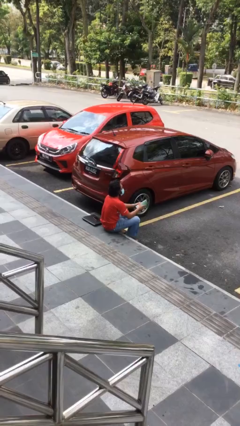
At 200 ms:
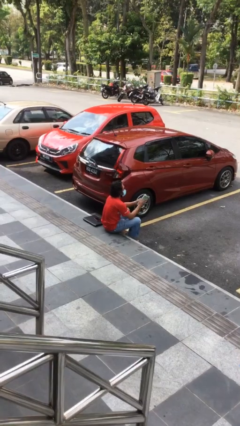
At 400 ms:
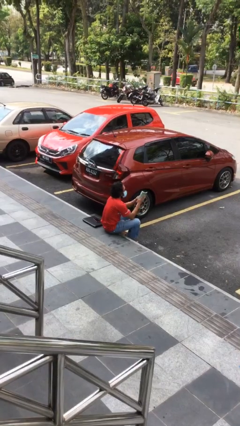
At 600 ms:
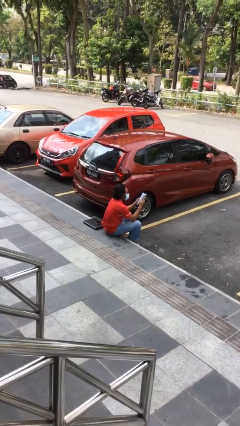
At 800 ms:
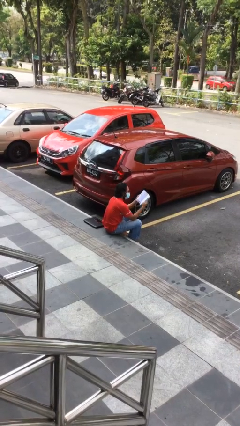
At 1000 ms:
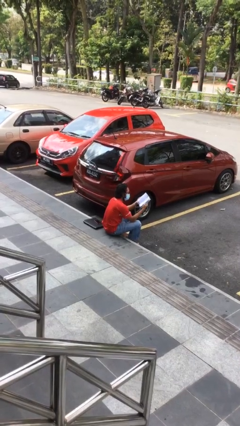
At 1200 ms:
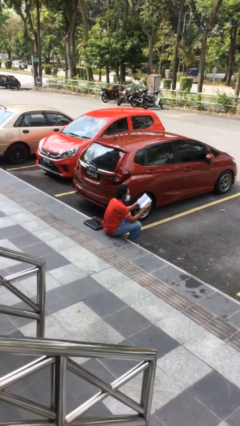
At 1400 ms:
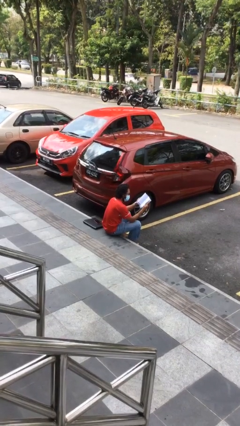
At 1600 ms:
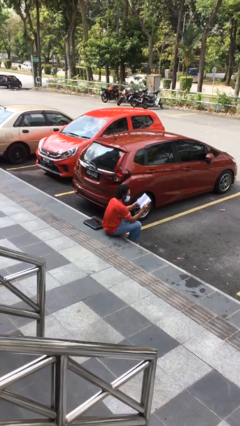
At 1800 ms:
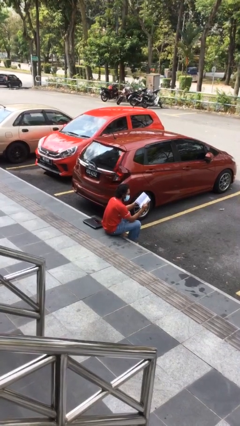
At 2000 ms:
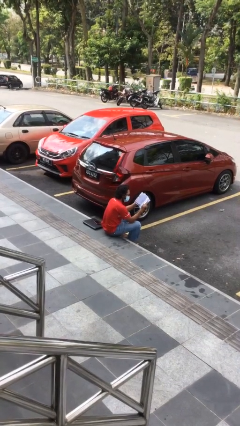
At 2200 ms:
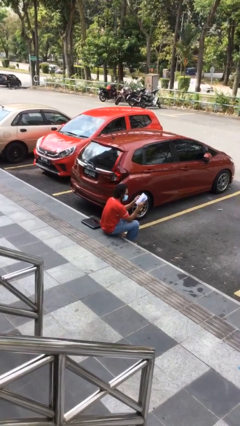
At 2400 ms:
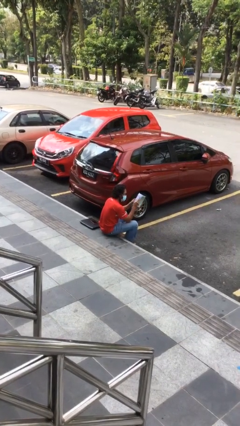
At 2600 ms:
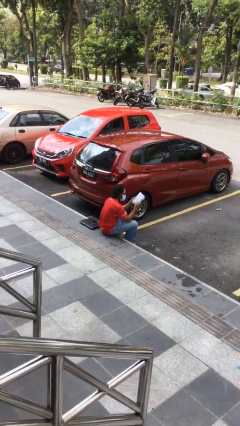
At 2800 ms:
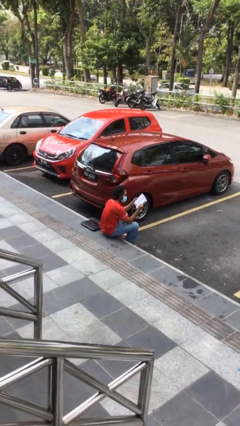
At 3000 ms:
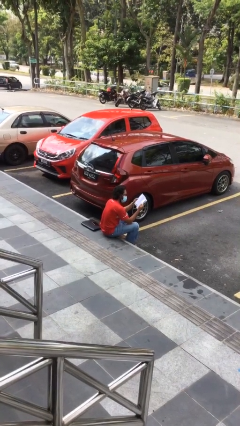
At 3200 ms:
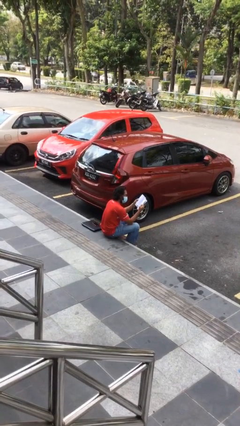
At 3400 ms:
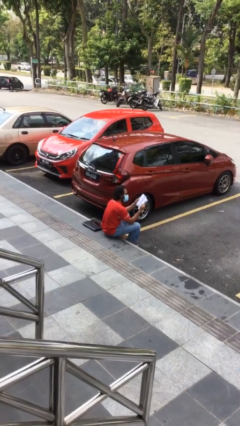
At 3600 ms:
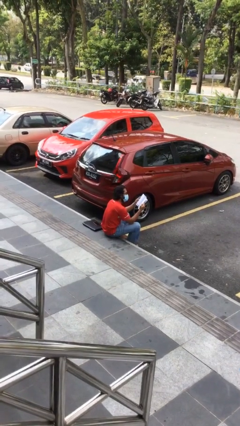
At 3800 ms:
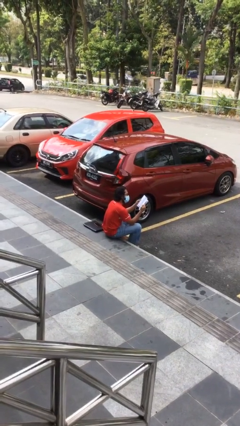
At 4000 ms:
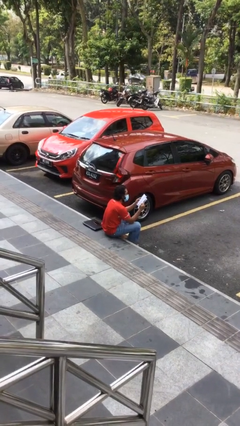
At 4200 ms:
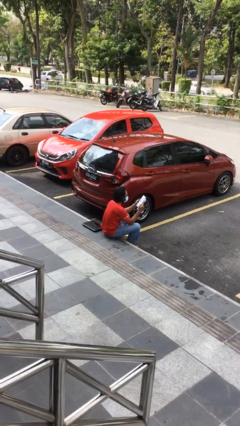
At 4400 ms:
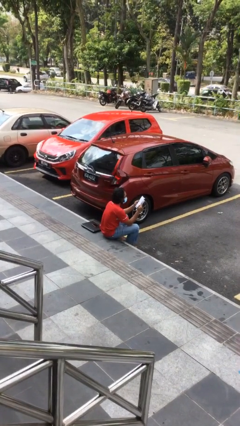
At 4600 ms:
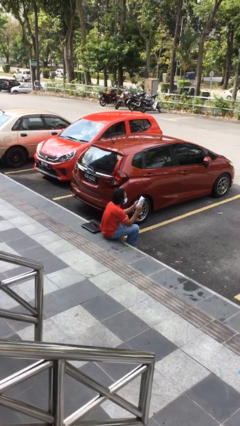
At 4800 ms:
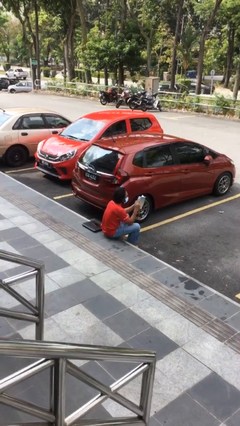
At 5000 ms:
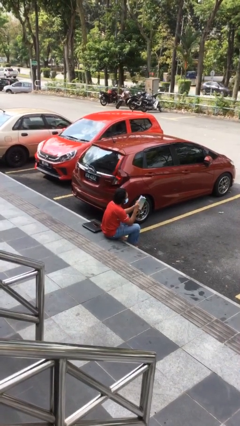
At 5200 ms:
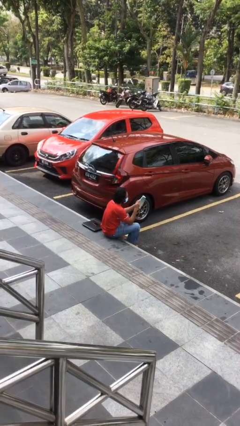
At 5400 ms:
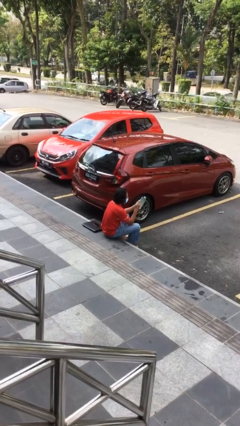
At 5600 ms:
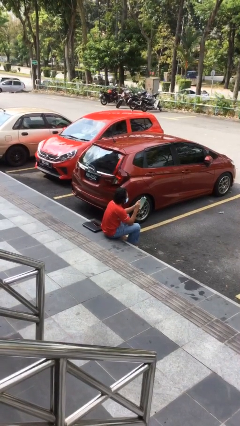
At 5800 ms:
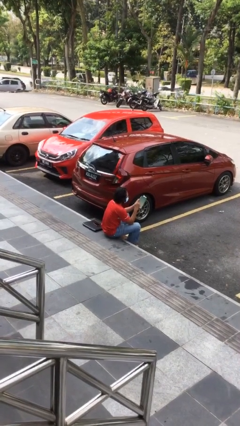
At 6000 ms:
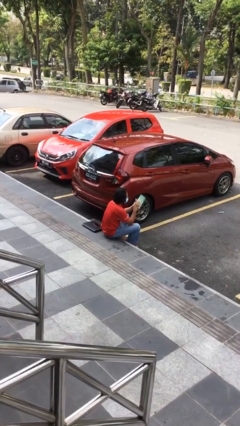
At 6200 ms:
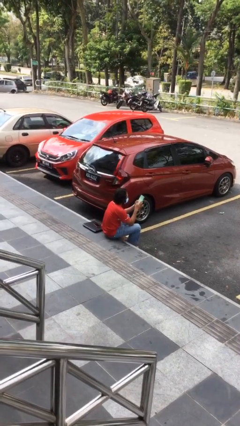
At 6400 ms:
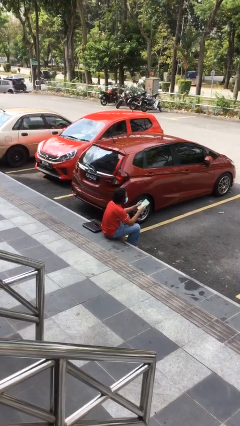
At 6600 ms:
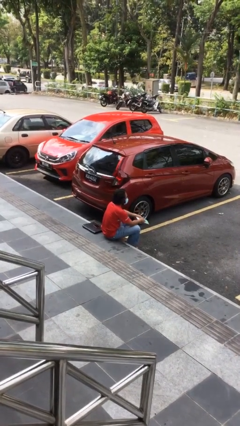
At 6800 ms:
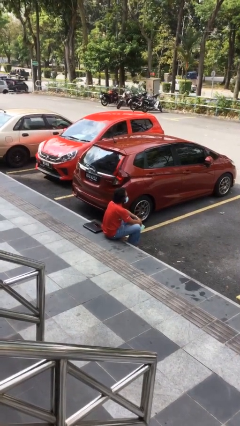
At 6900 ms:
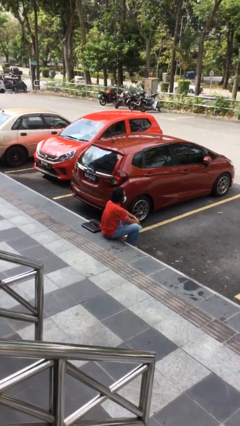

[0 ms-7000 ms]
person reads document

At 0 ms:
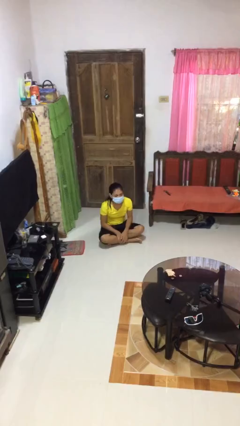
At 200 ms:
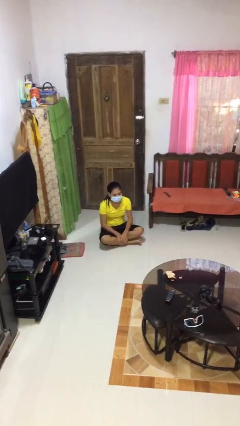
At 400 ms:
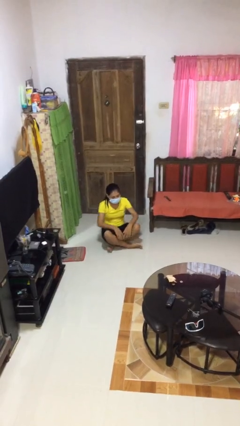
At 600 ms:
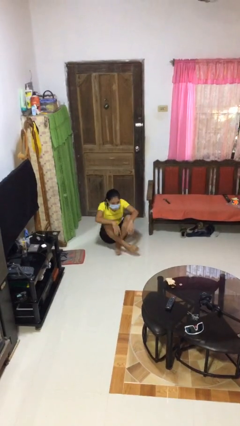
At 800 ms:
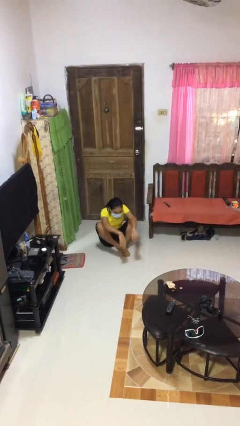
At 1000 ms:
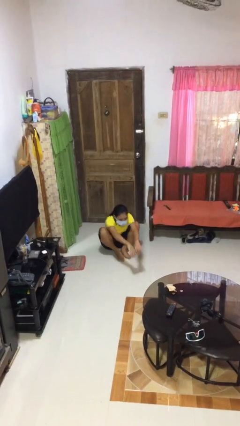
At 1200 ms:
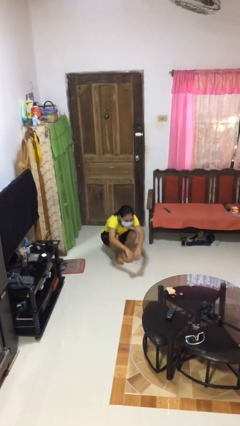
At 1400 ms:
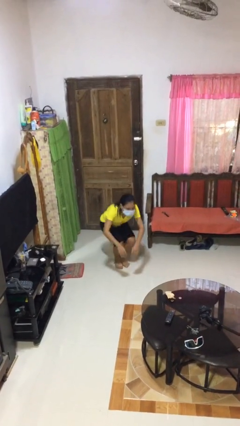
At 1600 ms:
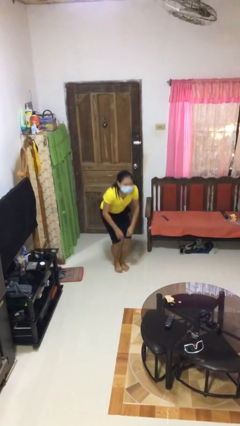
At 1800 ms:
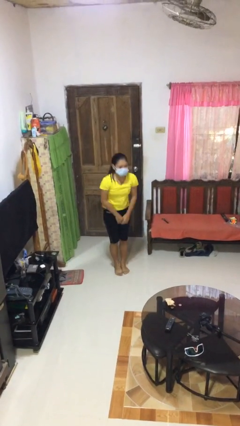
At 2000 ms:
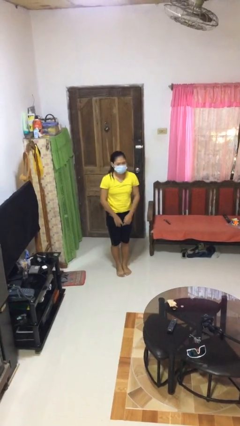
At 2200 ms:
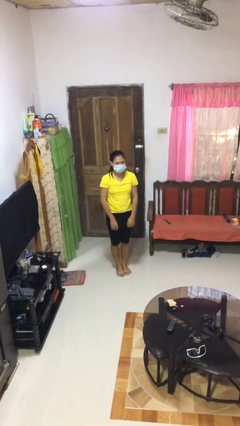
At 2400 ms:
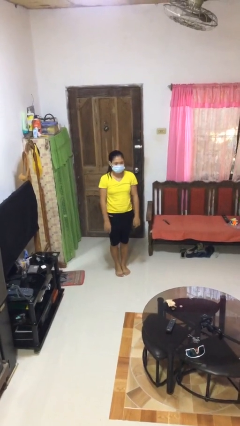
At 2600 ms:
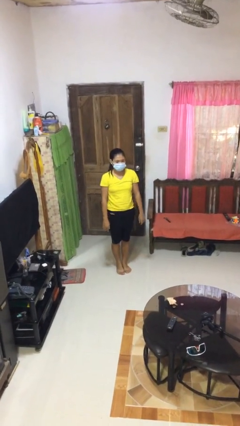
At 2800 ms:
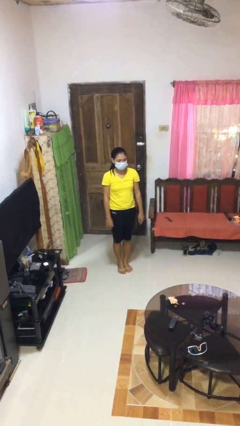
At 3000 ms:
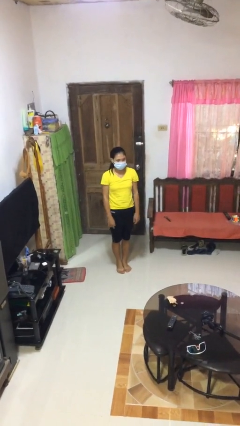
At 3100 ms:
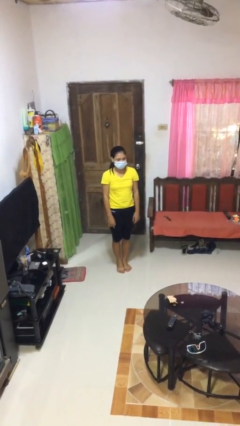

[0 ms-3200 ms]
person stands up from floor

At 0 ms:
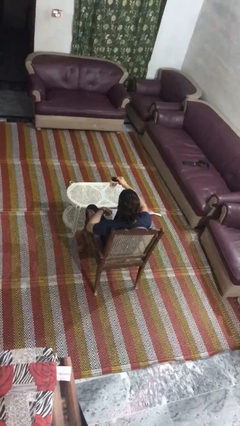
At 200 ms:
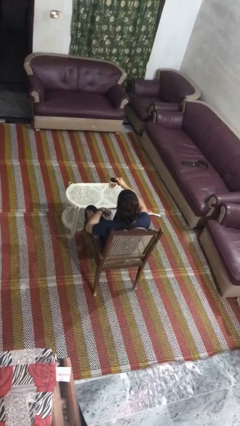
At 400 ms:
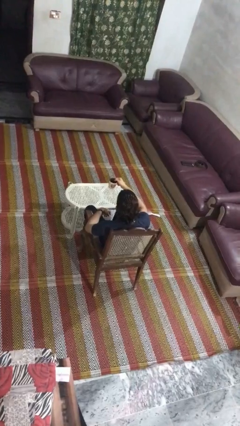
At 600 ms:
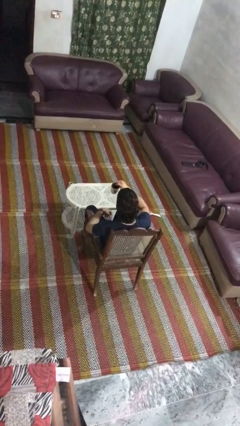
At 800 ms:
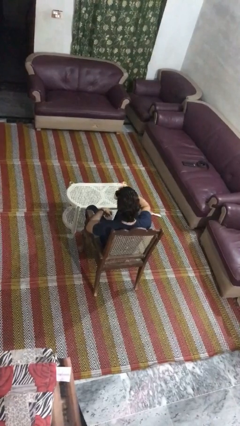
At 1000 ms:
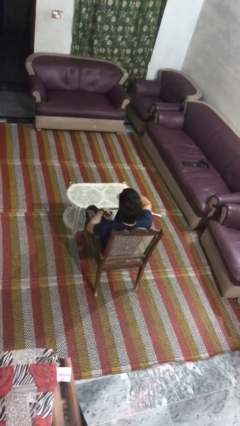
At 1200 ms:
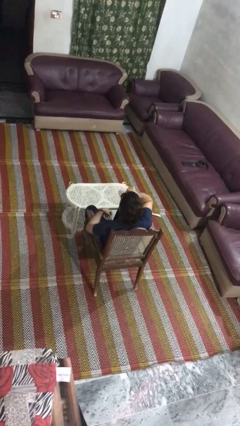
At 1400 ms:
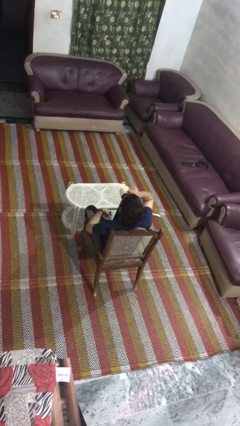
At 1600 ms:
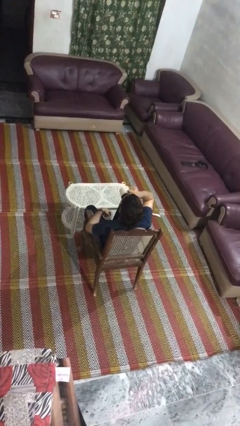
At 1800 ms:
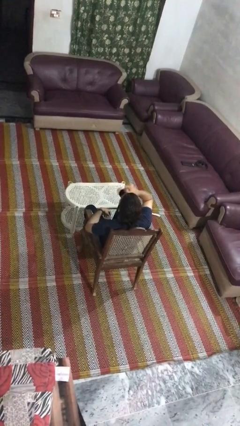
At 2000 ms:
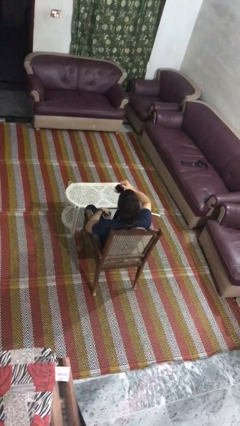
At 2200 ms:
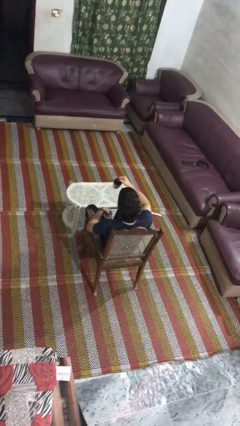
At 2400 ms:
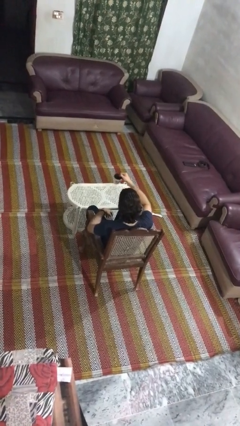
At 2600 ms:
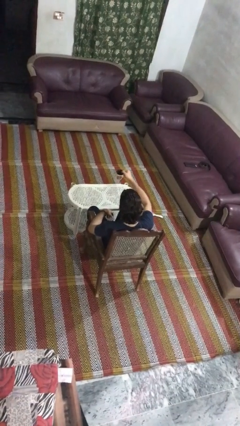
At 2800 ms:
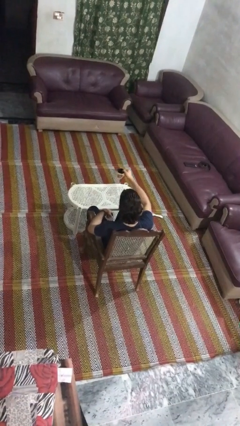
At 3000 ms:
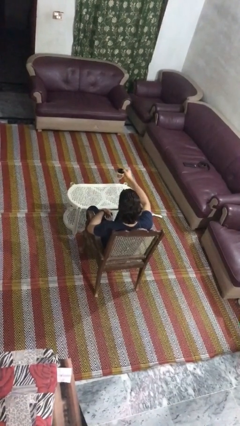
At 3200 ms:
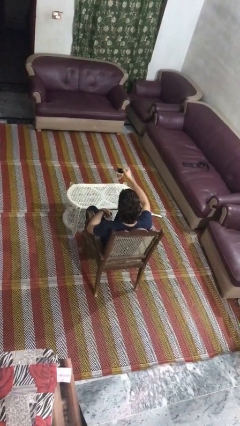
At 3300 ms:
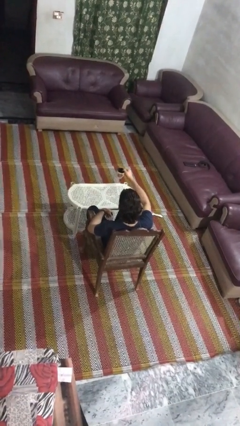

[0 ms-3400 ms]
person drinks from mug

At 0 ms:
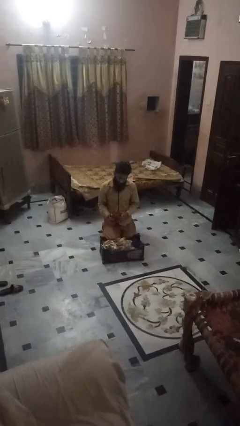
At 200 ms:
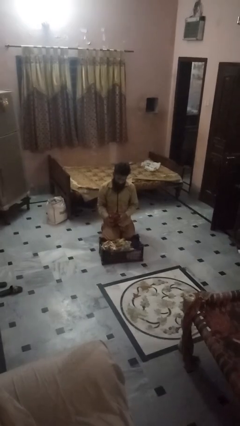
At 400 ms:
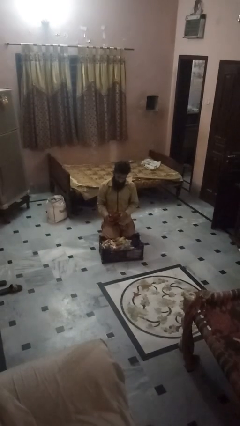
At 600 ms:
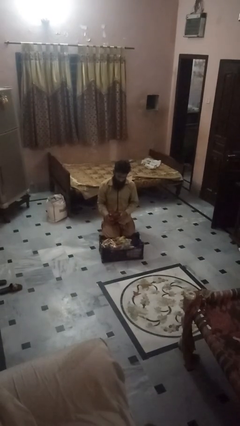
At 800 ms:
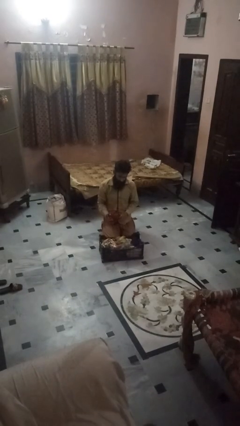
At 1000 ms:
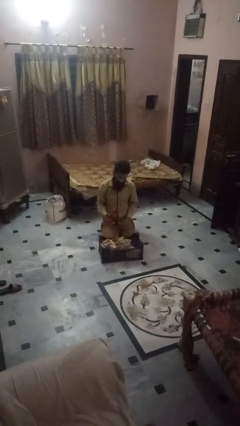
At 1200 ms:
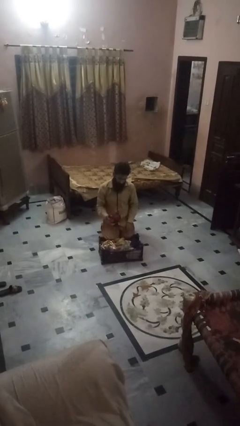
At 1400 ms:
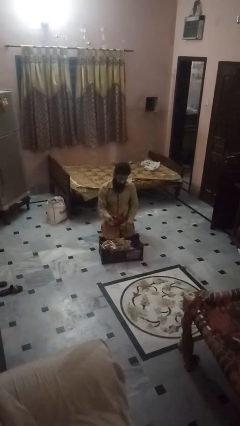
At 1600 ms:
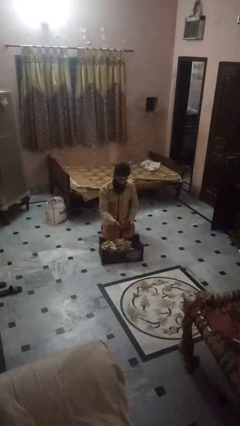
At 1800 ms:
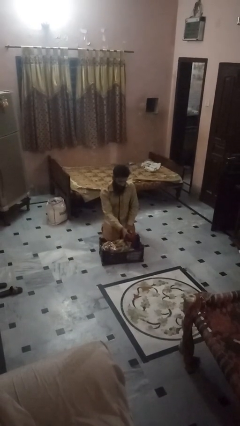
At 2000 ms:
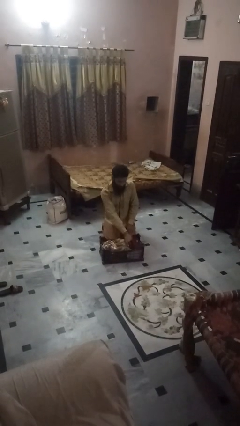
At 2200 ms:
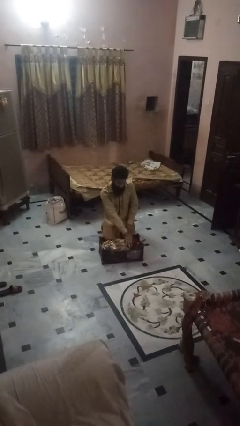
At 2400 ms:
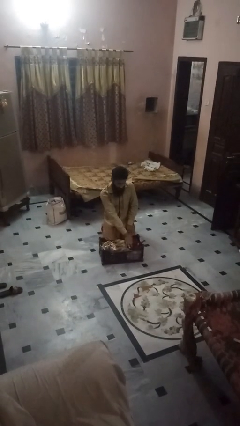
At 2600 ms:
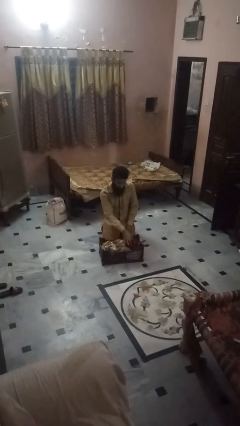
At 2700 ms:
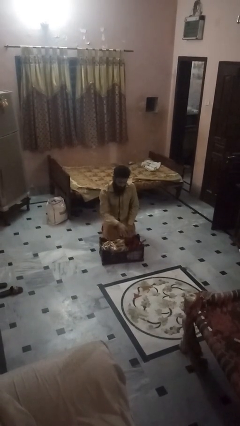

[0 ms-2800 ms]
person takes object from basket

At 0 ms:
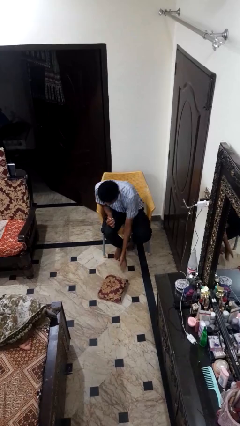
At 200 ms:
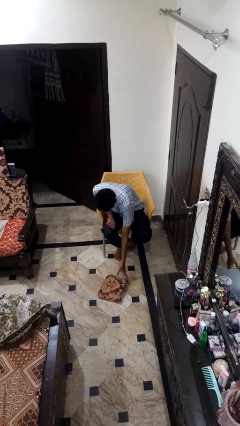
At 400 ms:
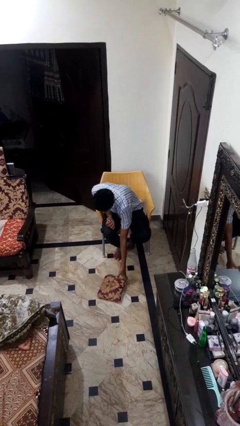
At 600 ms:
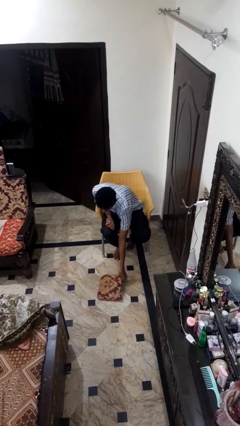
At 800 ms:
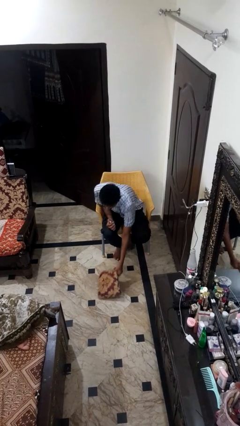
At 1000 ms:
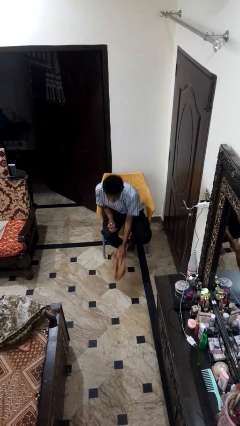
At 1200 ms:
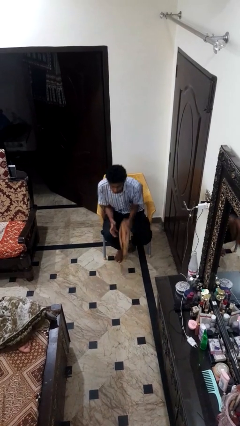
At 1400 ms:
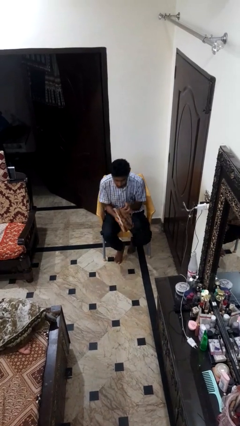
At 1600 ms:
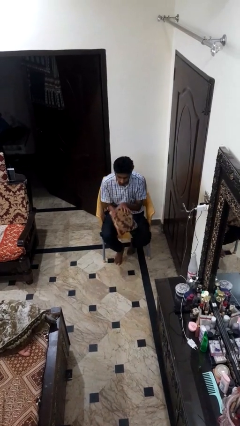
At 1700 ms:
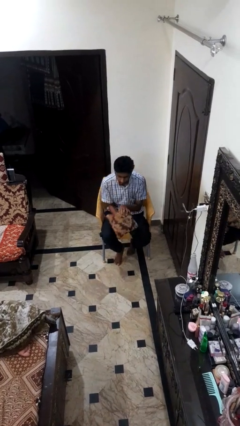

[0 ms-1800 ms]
person picks up object from floor
